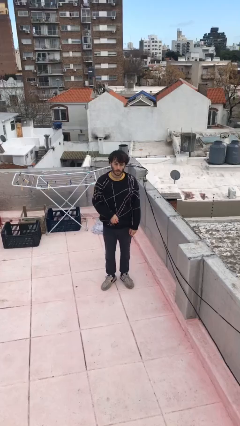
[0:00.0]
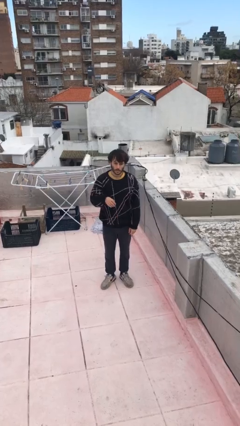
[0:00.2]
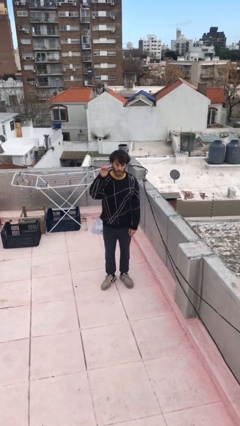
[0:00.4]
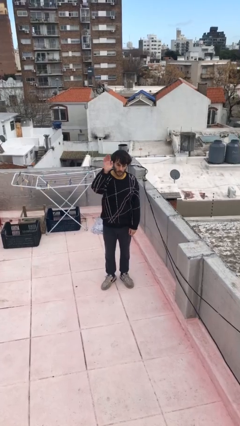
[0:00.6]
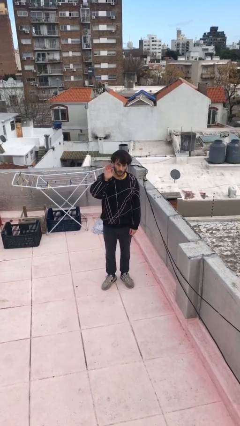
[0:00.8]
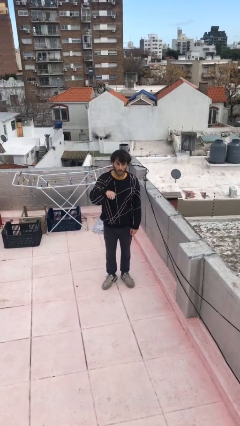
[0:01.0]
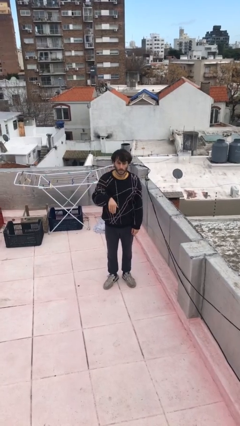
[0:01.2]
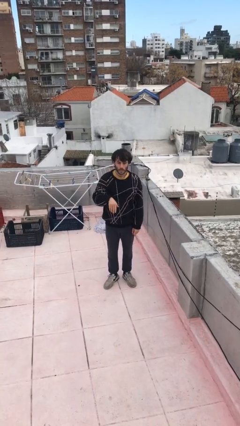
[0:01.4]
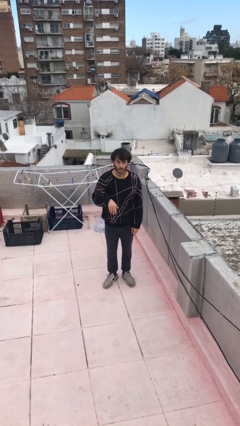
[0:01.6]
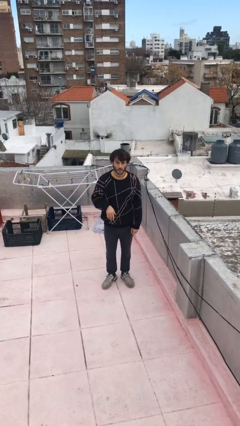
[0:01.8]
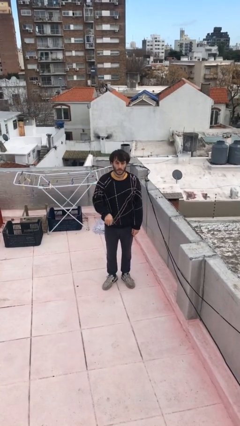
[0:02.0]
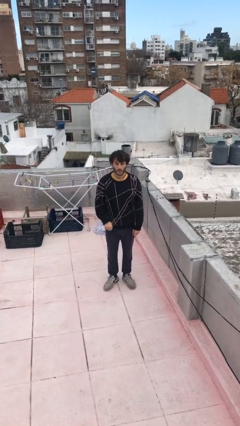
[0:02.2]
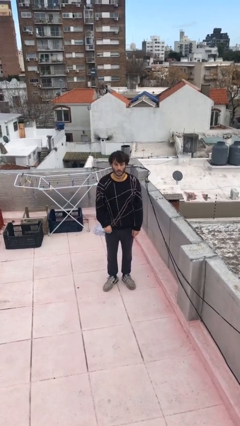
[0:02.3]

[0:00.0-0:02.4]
person gestures swipe down

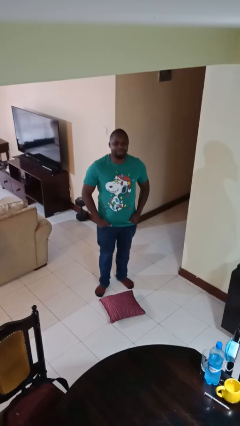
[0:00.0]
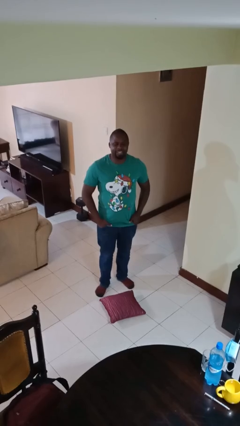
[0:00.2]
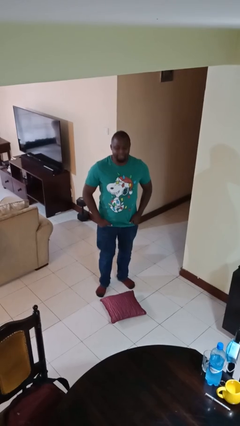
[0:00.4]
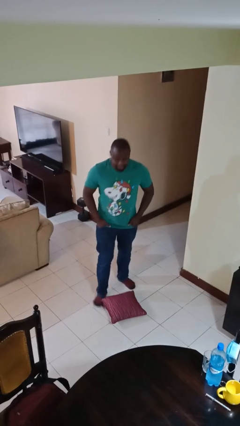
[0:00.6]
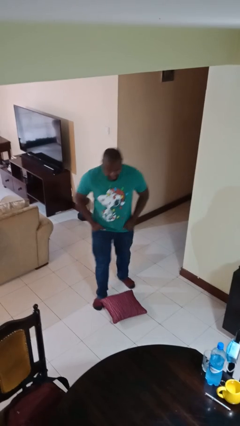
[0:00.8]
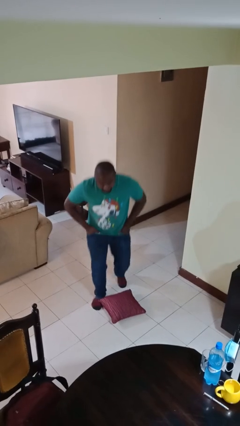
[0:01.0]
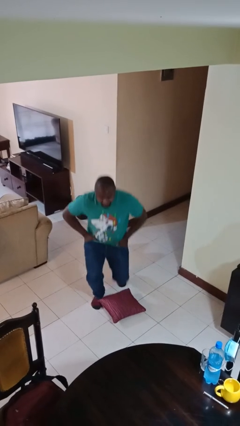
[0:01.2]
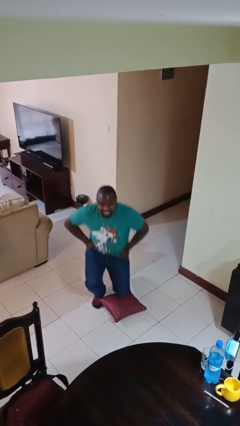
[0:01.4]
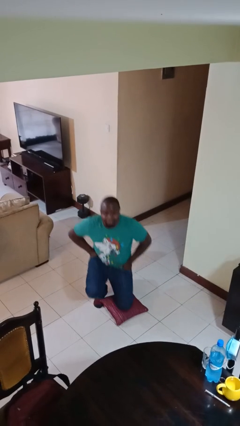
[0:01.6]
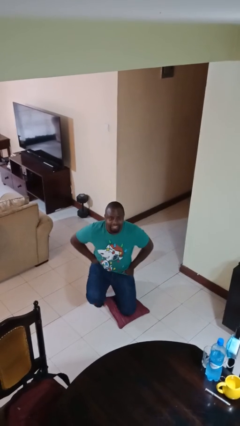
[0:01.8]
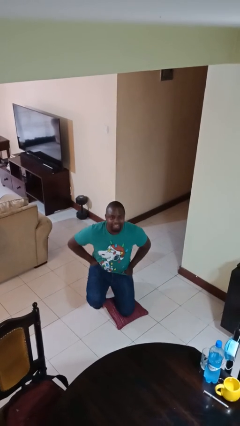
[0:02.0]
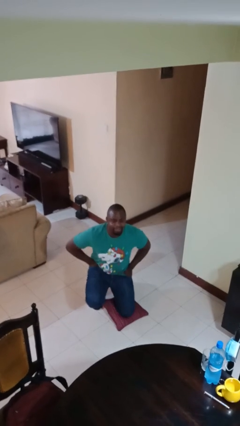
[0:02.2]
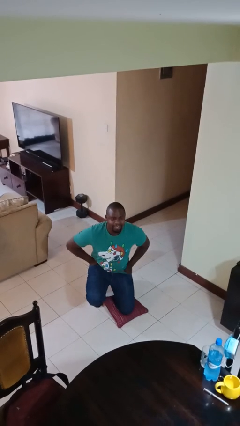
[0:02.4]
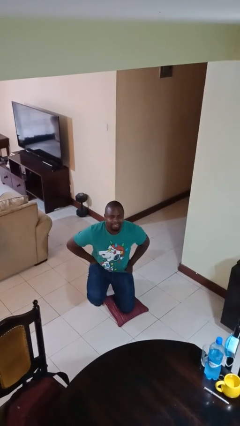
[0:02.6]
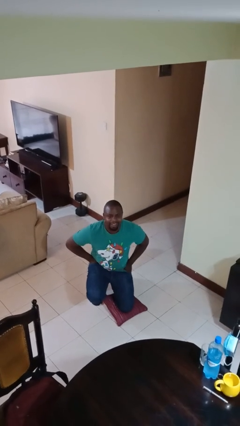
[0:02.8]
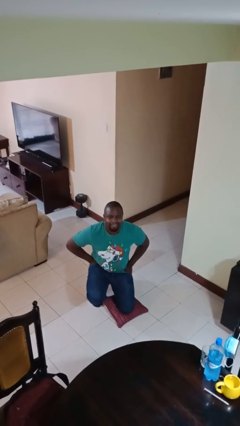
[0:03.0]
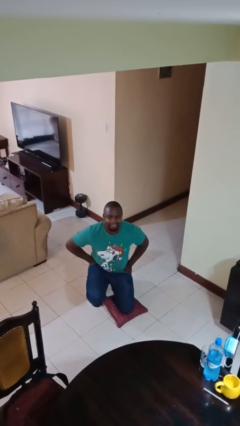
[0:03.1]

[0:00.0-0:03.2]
person kneels

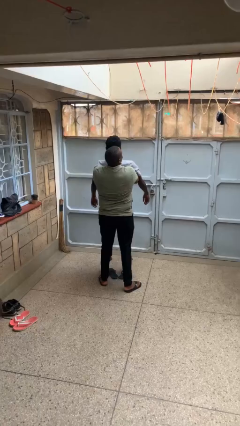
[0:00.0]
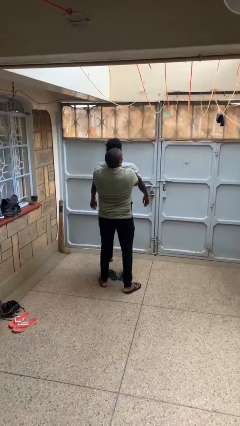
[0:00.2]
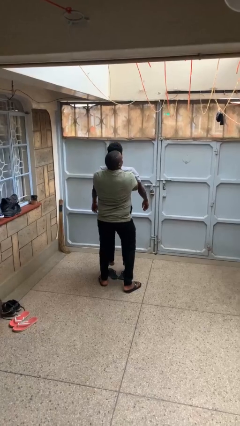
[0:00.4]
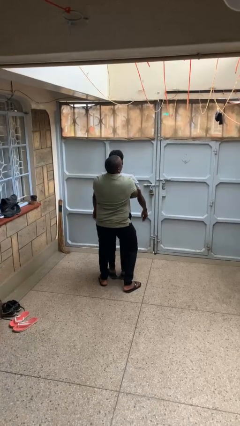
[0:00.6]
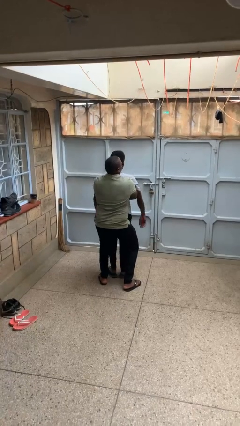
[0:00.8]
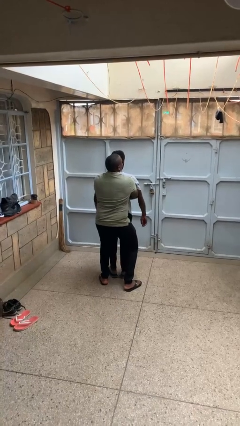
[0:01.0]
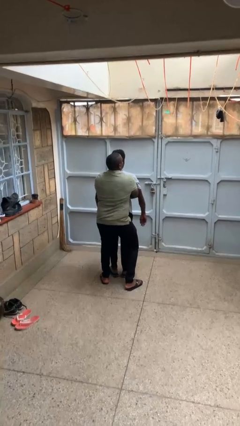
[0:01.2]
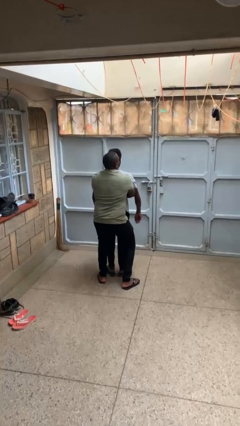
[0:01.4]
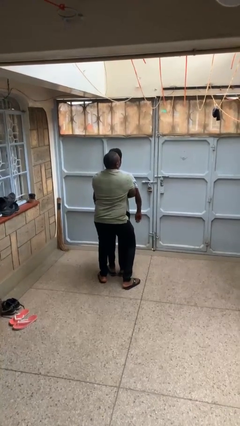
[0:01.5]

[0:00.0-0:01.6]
person puts down person

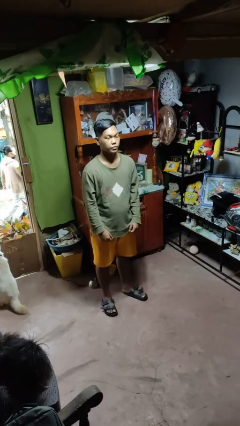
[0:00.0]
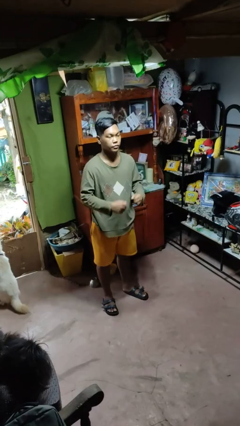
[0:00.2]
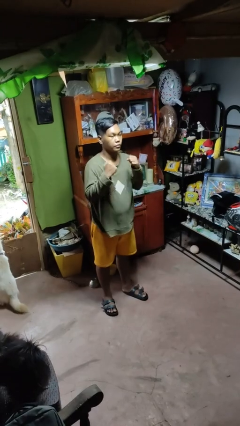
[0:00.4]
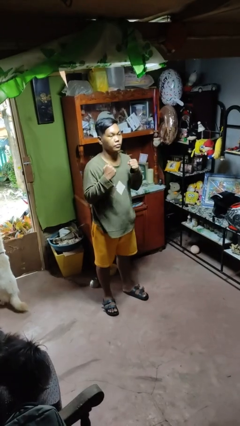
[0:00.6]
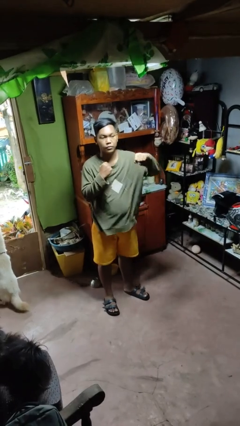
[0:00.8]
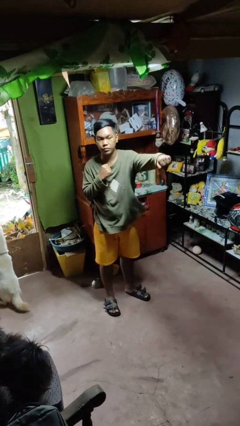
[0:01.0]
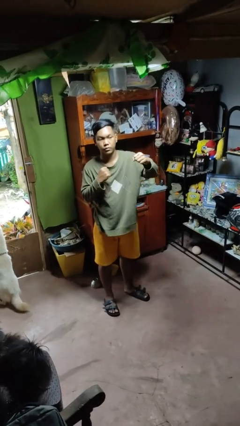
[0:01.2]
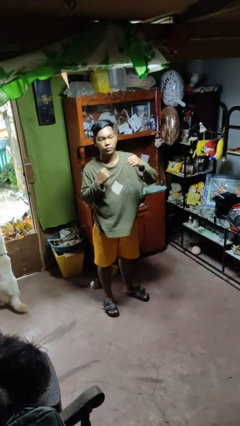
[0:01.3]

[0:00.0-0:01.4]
person punches

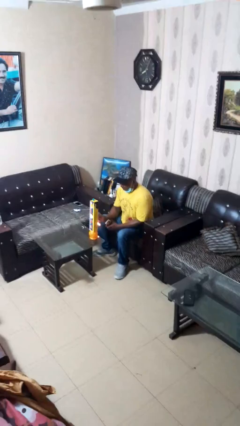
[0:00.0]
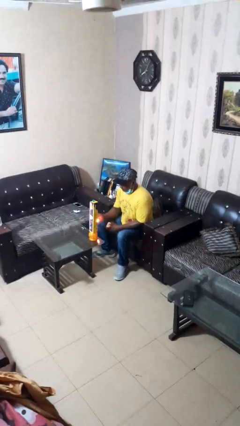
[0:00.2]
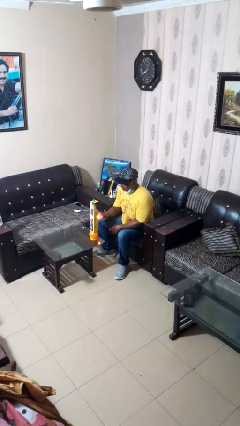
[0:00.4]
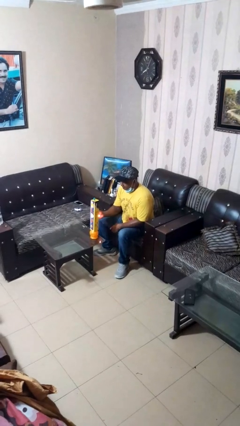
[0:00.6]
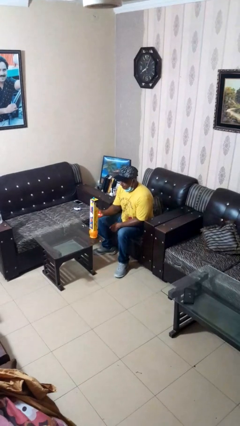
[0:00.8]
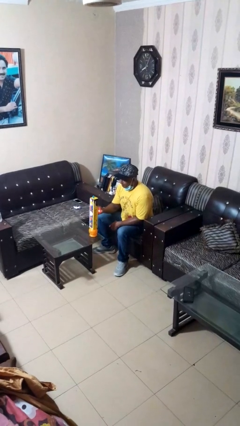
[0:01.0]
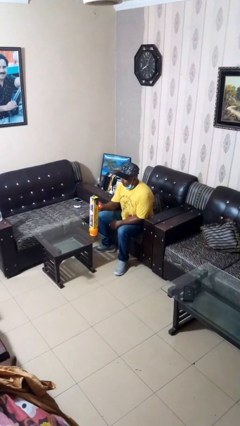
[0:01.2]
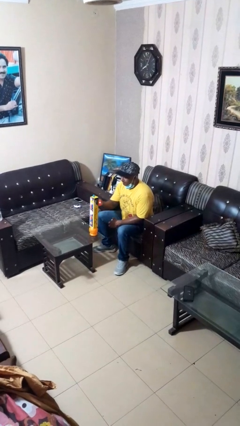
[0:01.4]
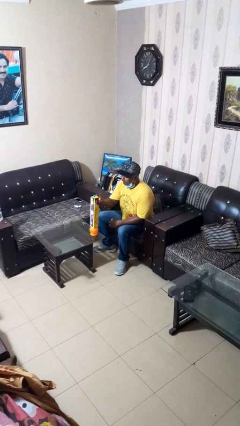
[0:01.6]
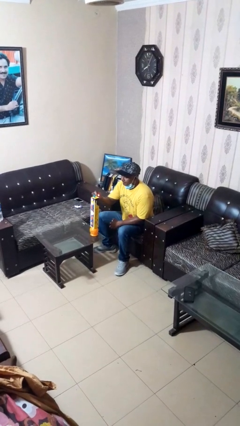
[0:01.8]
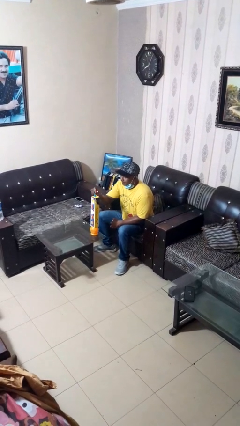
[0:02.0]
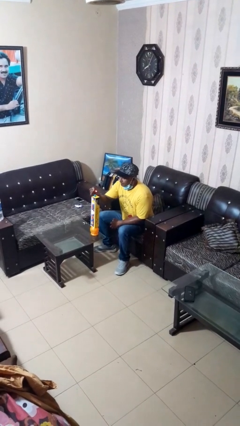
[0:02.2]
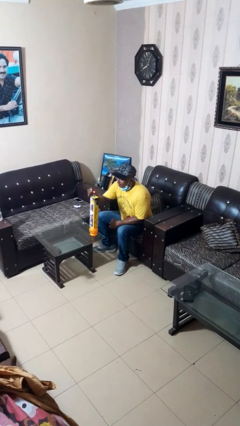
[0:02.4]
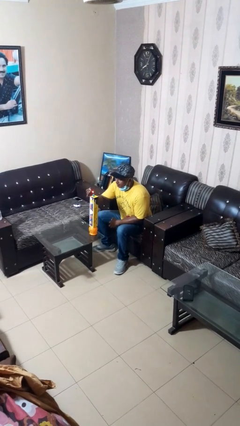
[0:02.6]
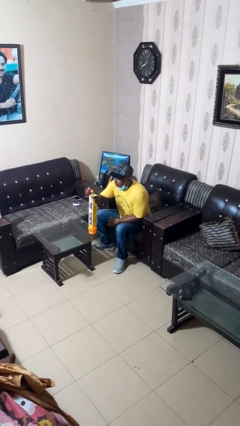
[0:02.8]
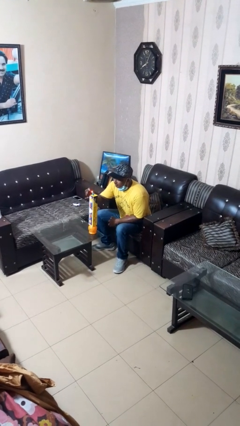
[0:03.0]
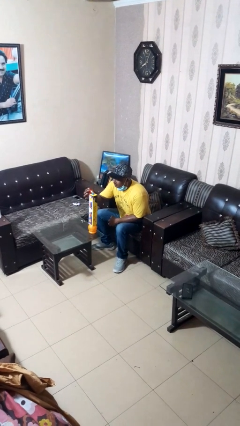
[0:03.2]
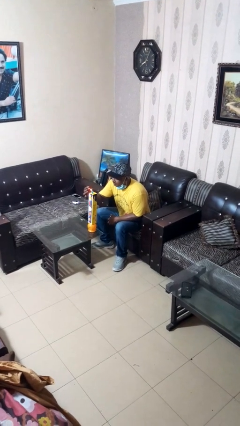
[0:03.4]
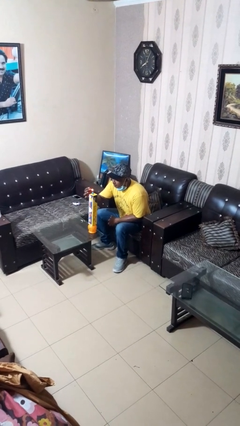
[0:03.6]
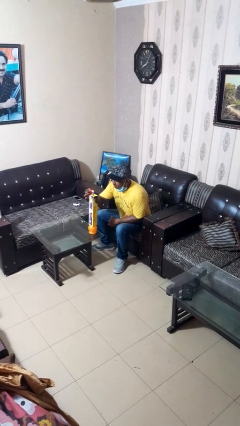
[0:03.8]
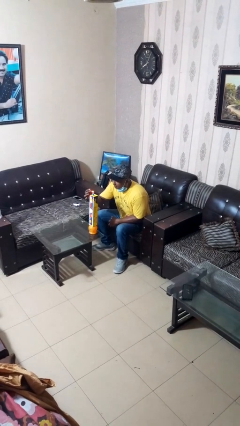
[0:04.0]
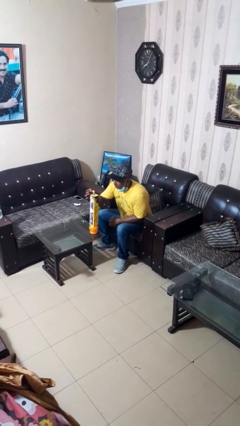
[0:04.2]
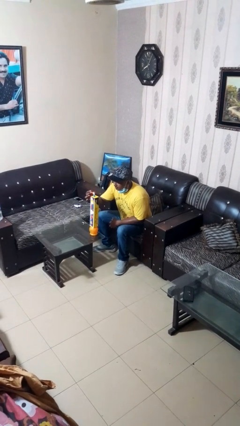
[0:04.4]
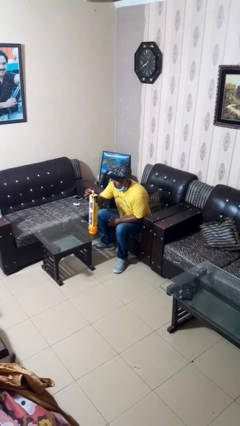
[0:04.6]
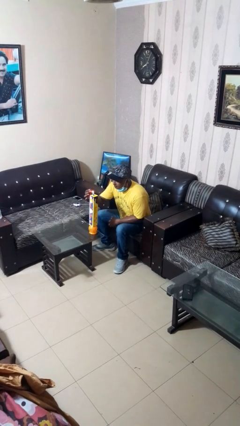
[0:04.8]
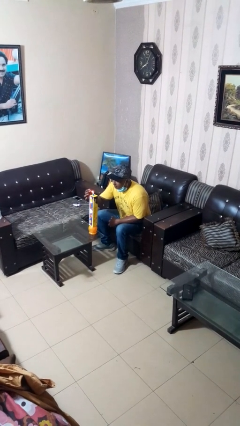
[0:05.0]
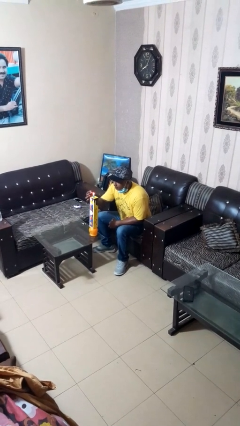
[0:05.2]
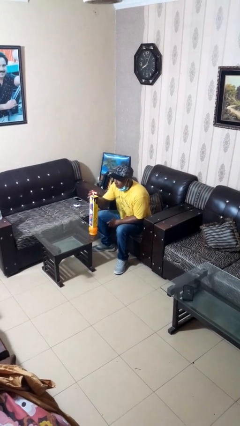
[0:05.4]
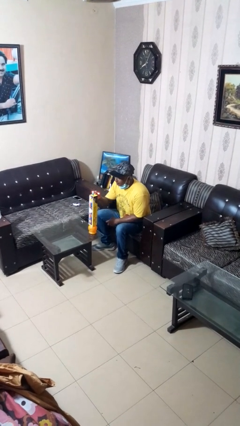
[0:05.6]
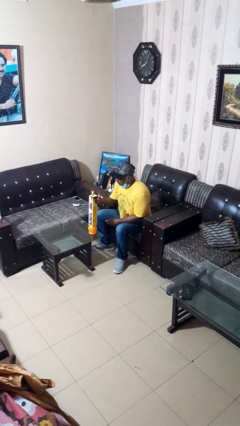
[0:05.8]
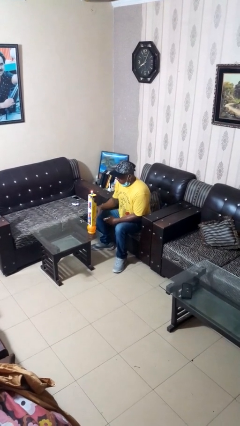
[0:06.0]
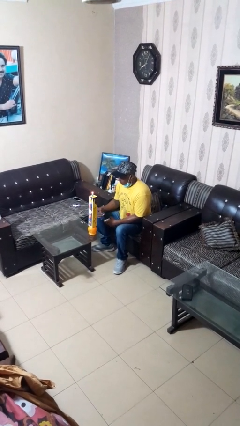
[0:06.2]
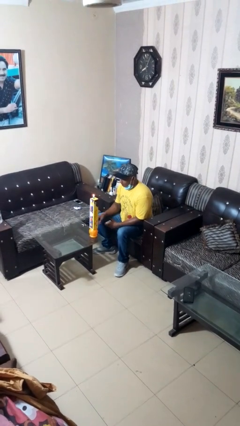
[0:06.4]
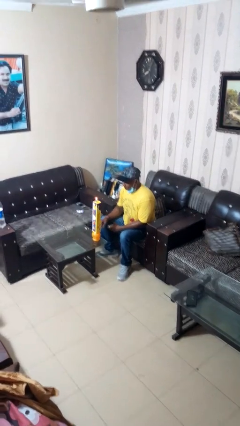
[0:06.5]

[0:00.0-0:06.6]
person lights candle

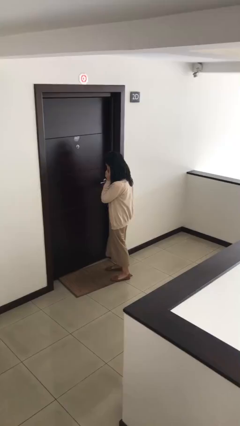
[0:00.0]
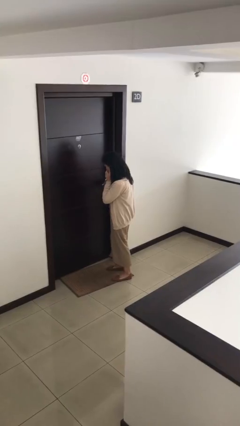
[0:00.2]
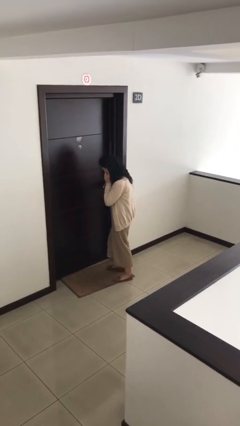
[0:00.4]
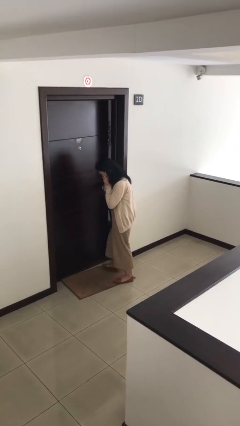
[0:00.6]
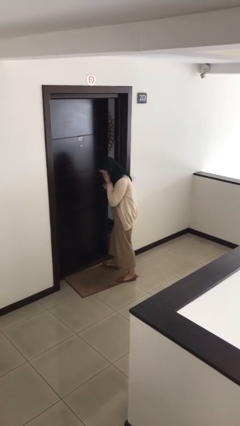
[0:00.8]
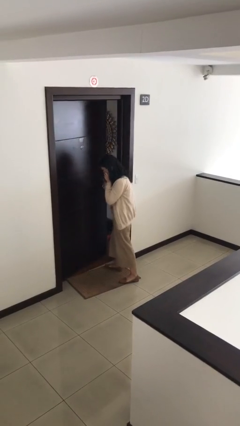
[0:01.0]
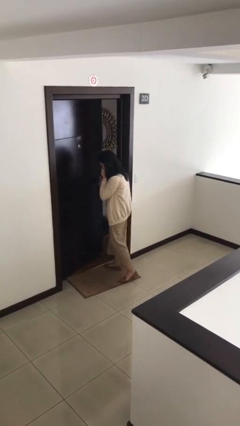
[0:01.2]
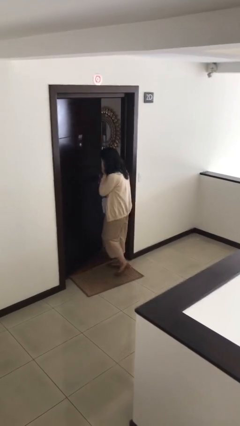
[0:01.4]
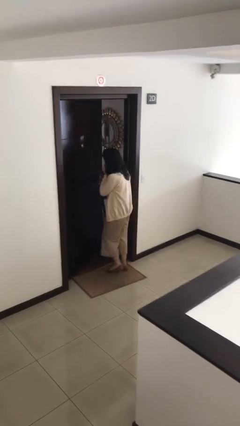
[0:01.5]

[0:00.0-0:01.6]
person opens facility door

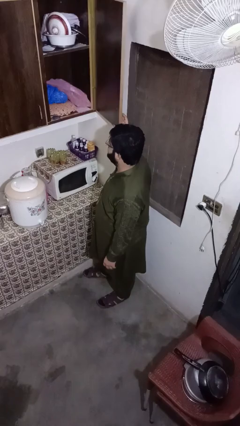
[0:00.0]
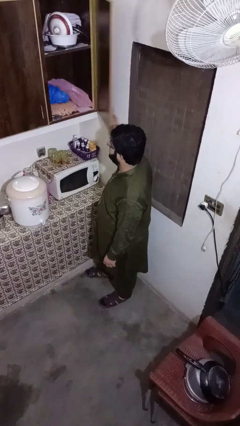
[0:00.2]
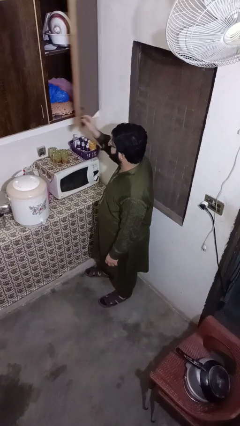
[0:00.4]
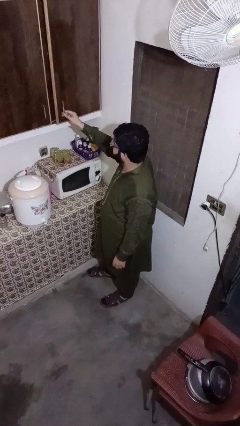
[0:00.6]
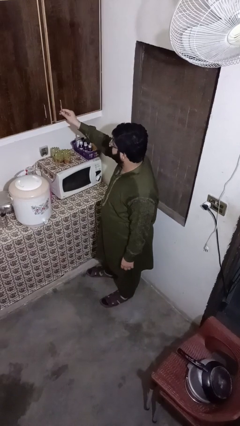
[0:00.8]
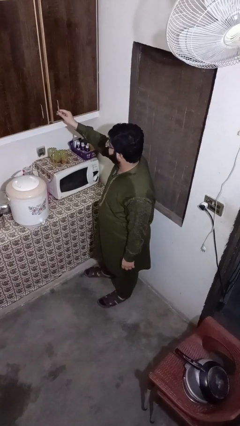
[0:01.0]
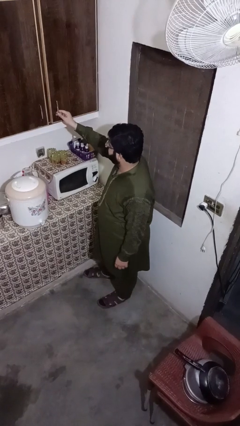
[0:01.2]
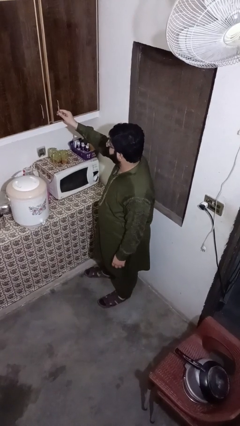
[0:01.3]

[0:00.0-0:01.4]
person closes kitchen drawer
